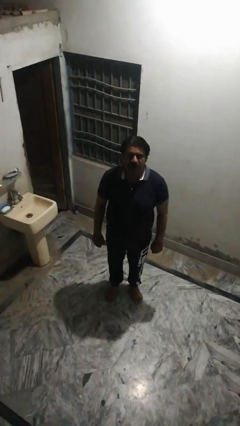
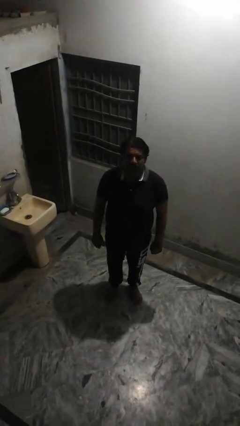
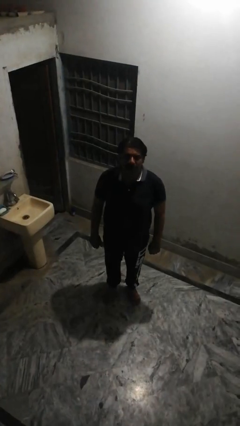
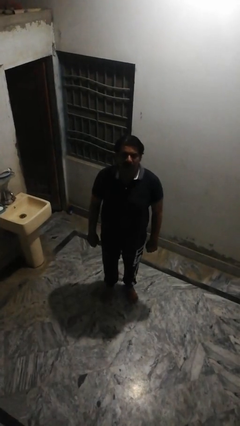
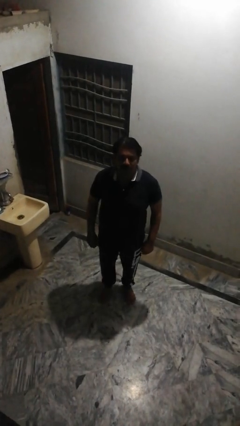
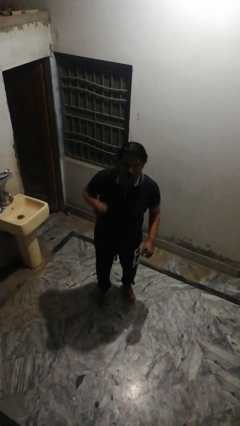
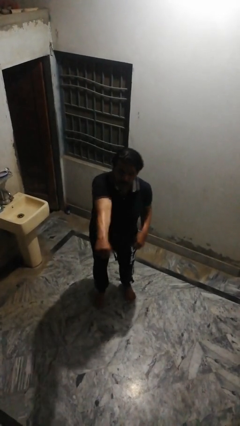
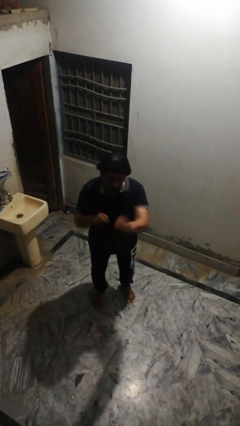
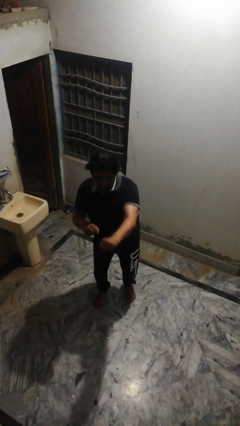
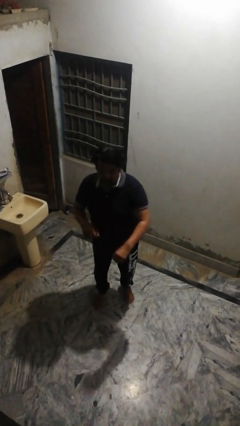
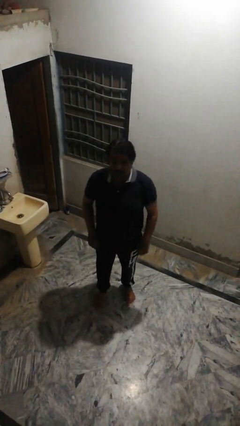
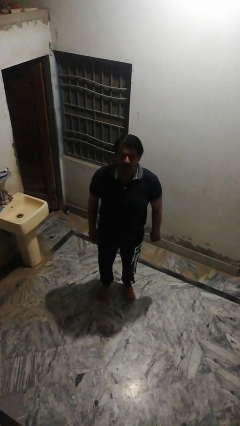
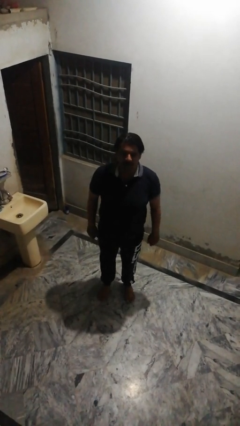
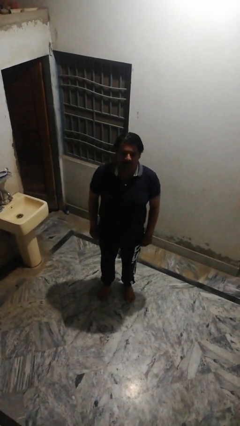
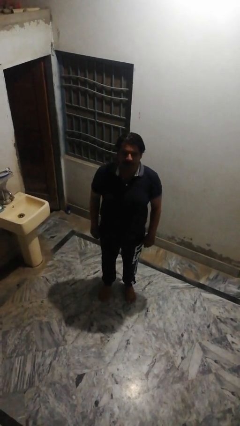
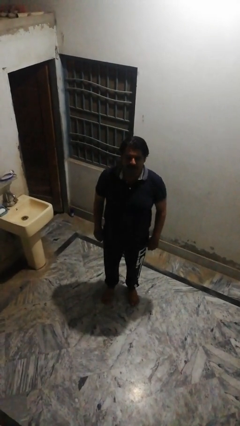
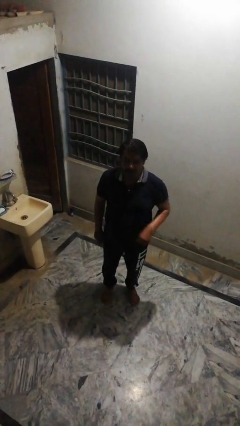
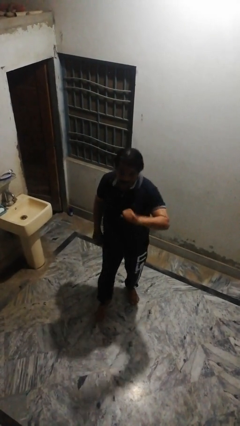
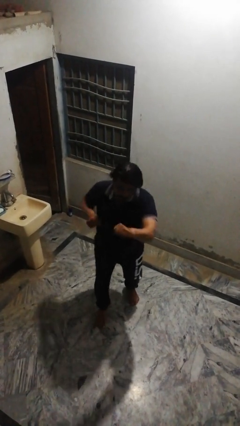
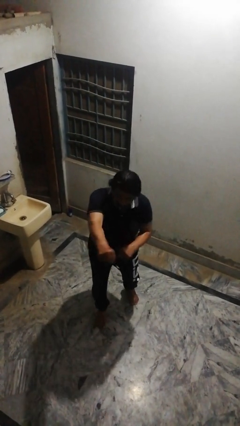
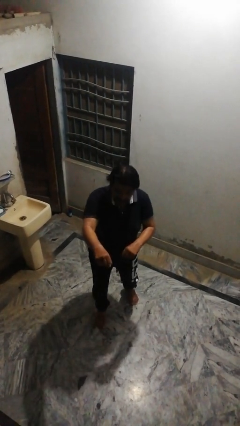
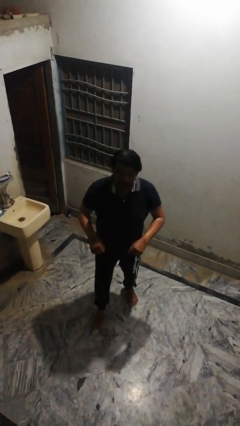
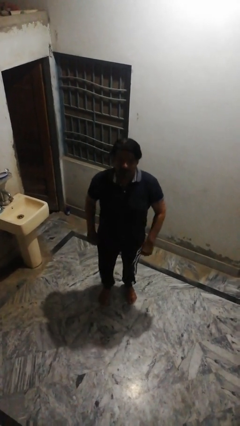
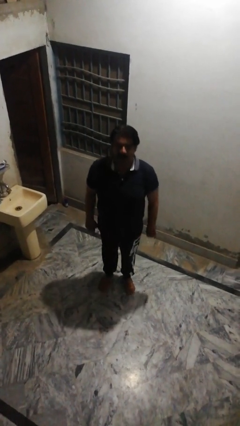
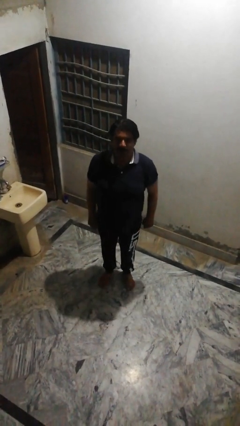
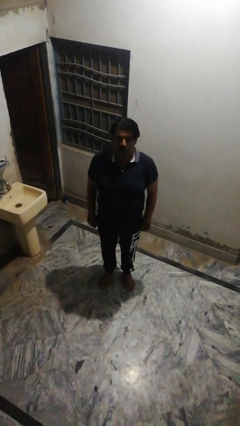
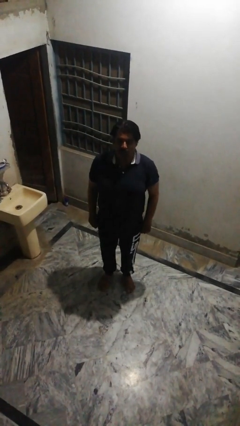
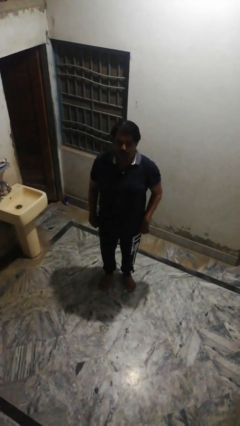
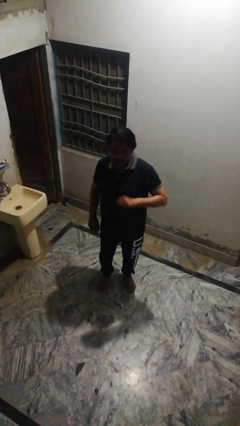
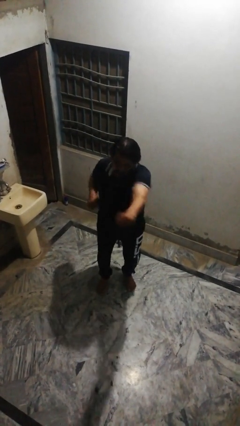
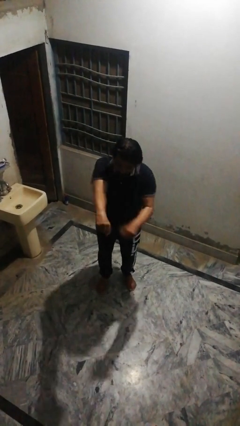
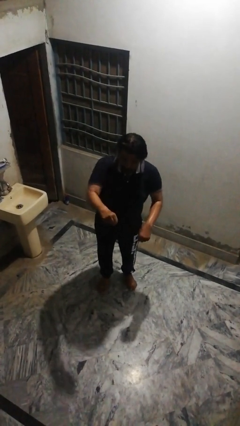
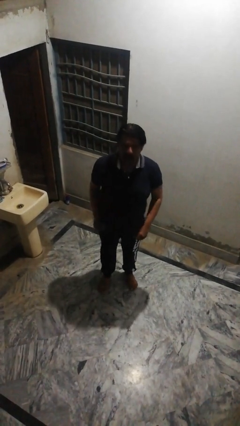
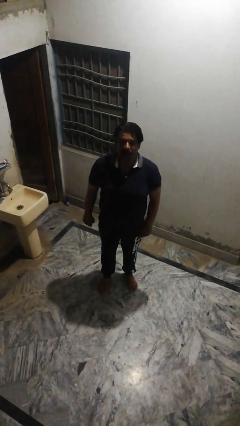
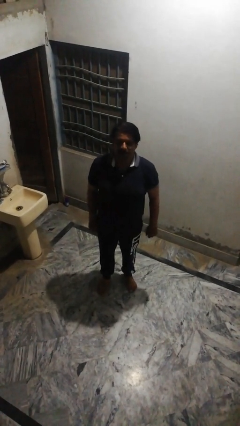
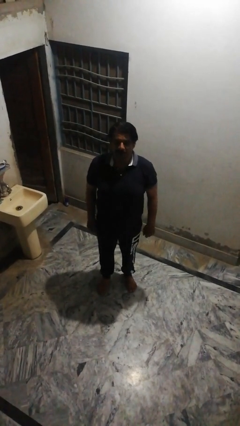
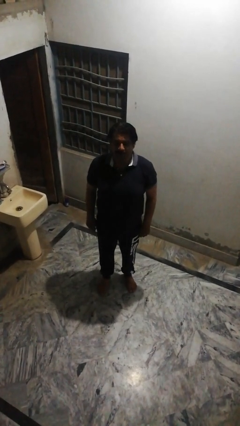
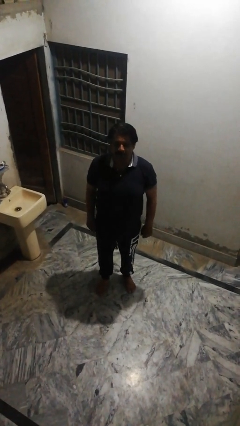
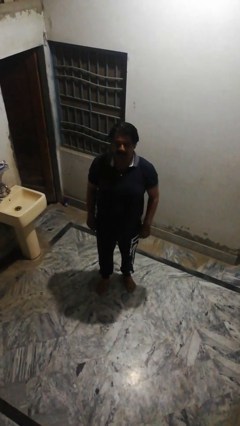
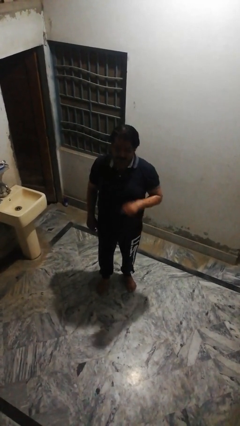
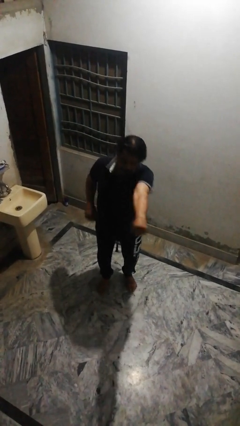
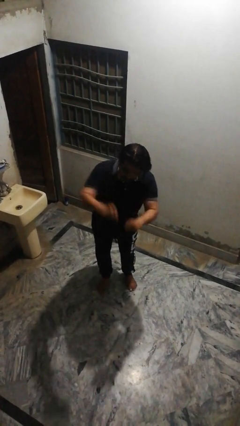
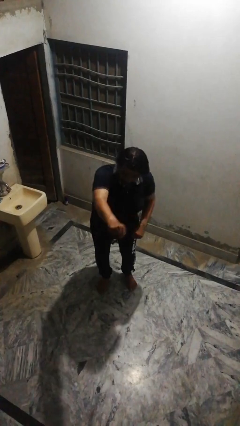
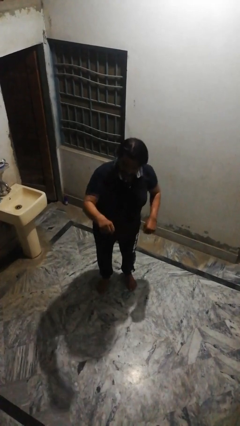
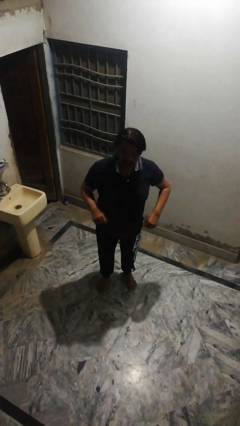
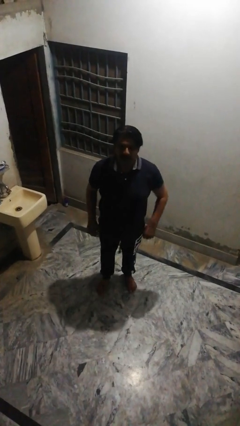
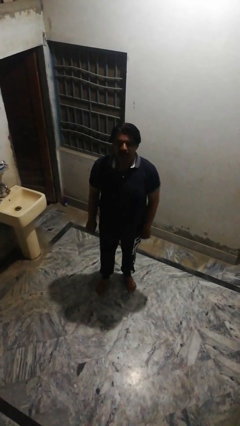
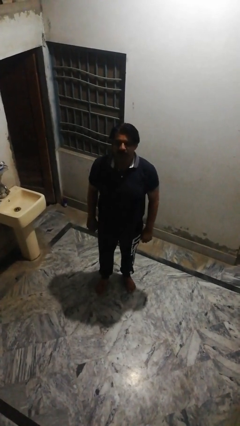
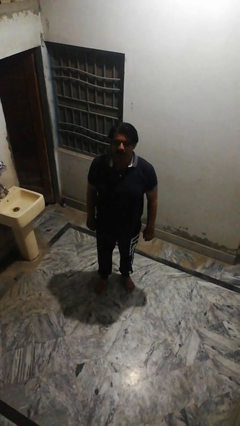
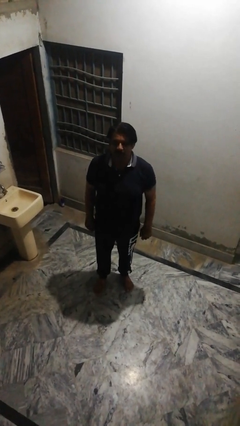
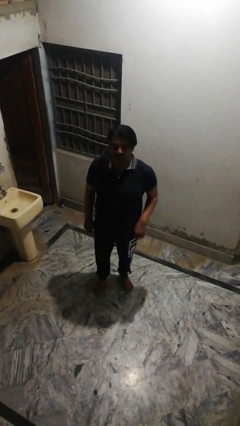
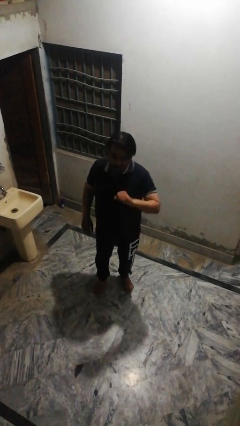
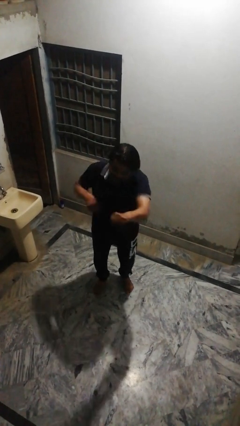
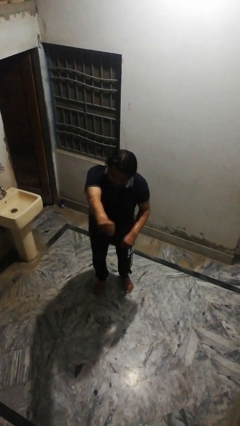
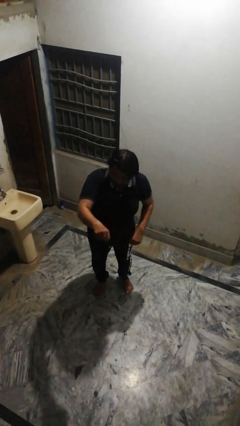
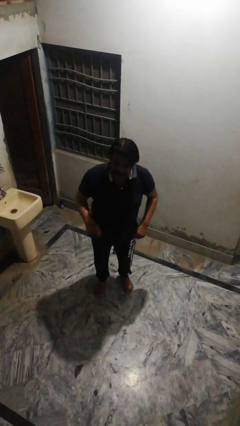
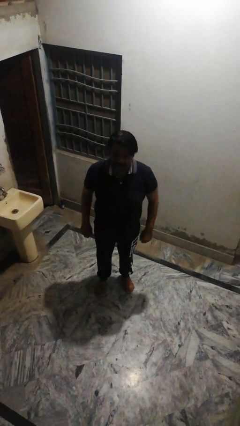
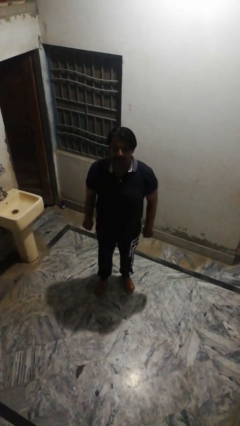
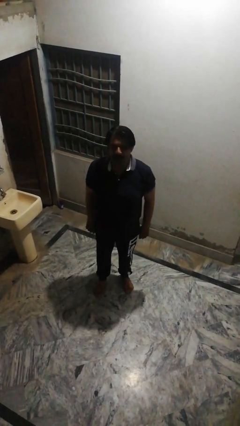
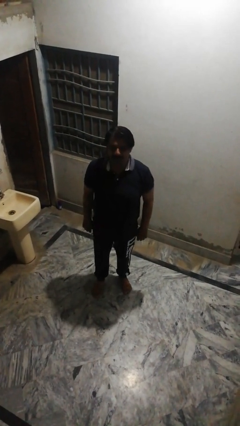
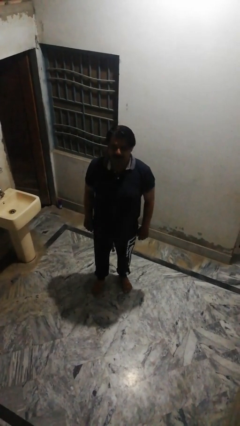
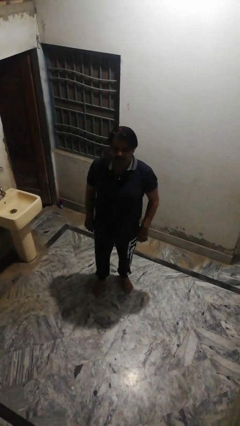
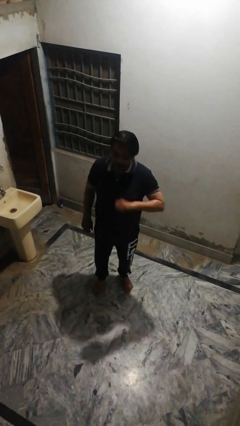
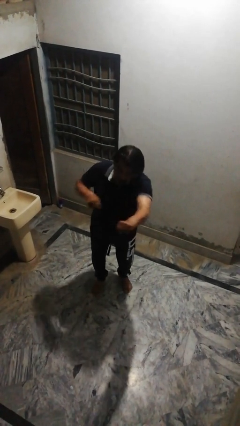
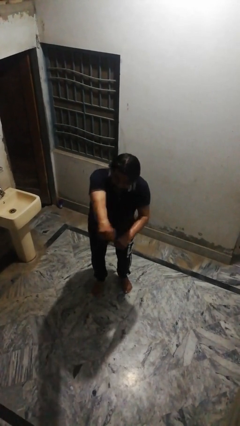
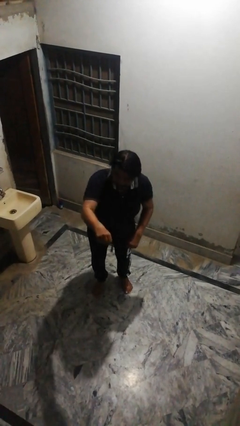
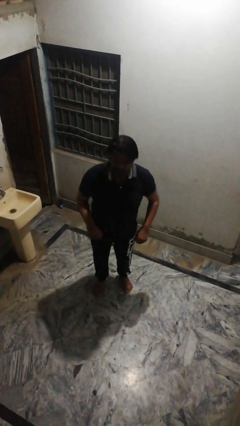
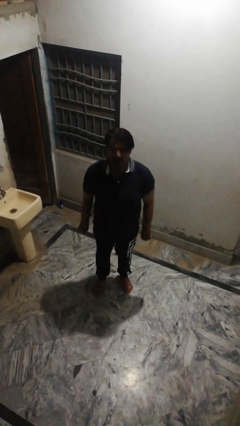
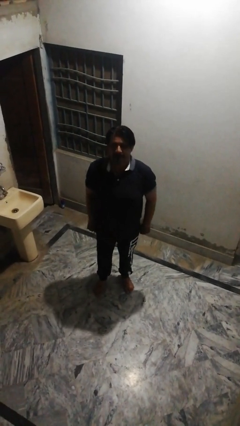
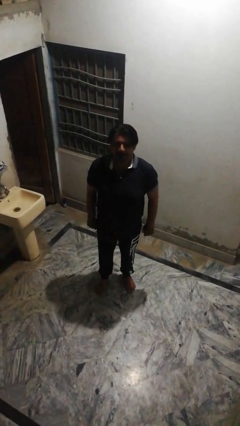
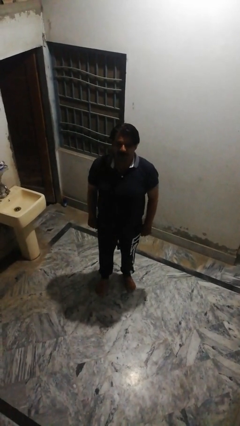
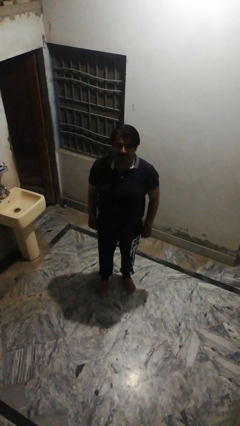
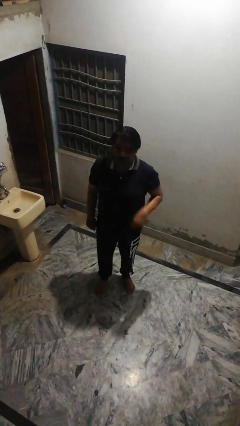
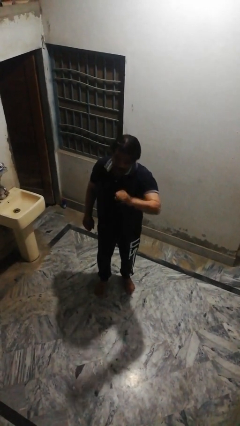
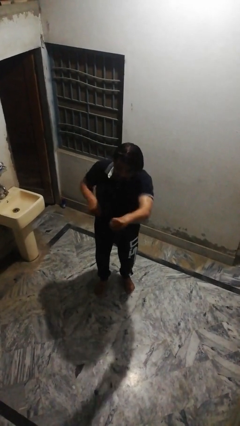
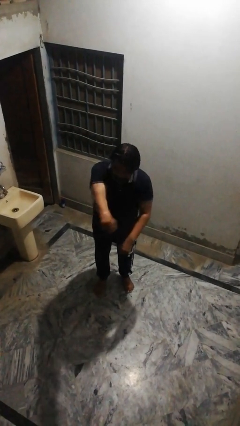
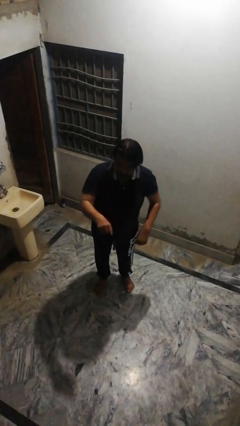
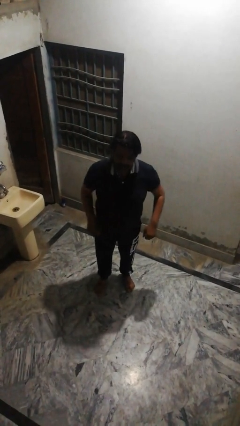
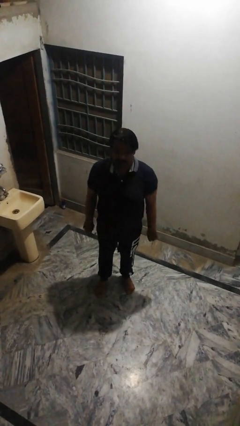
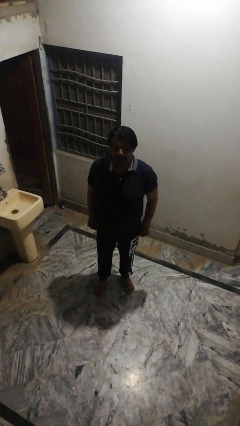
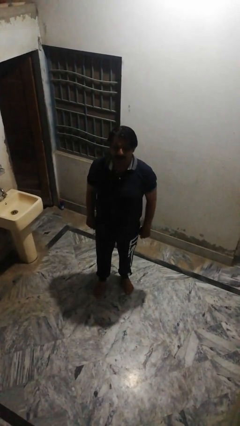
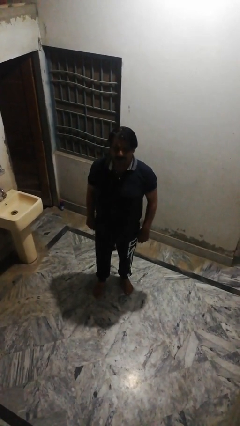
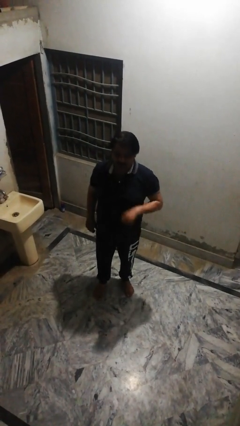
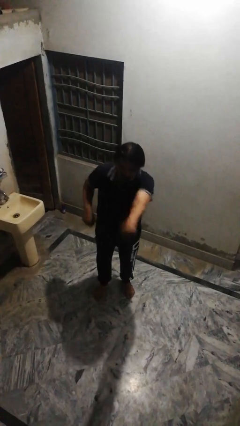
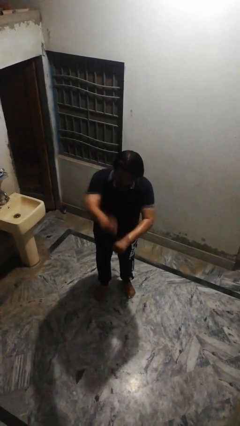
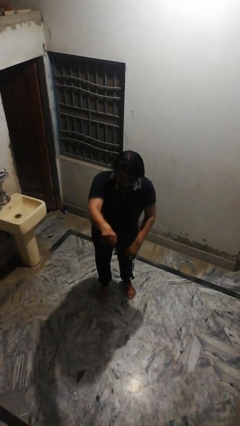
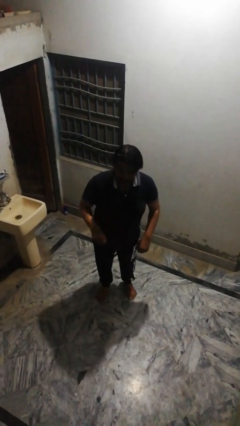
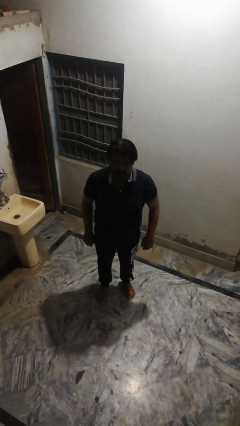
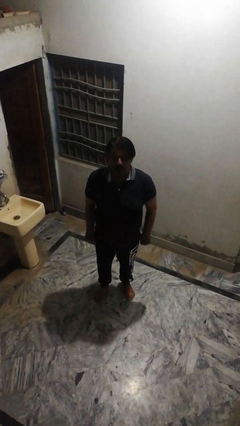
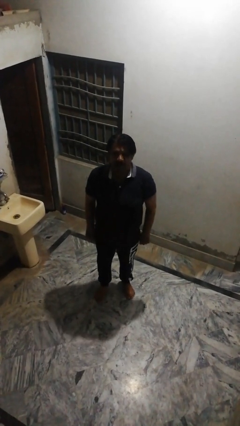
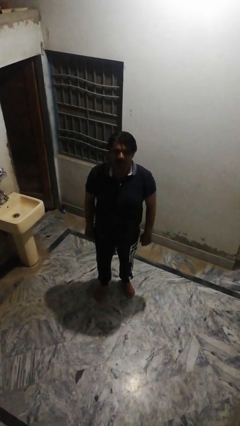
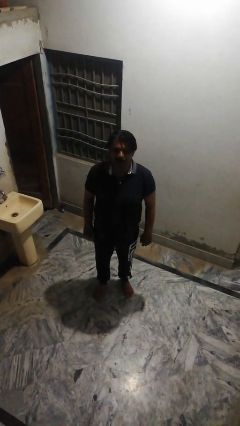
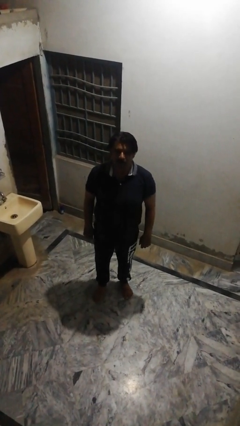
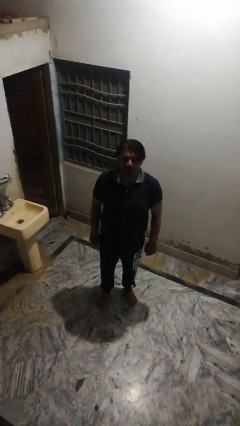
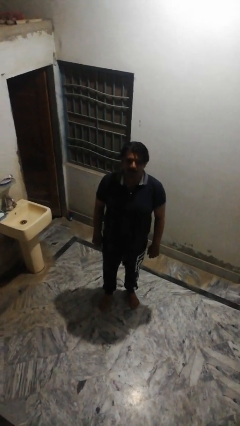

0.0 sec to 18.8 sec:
person punches
